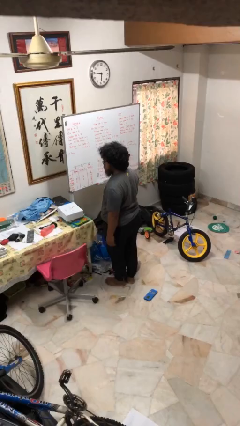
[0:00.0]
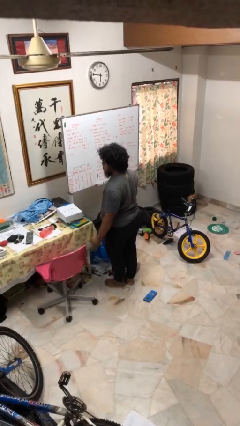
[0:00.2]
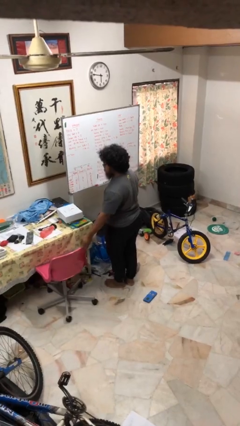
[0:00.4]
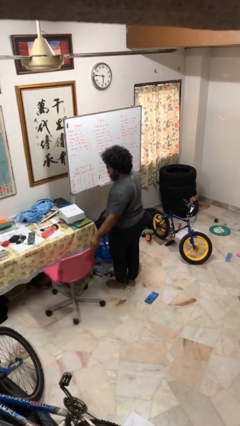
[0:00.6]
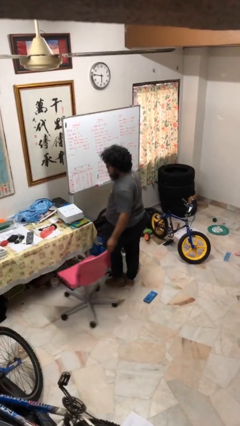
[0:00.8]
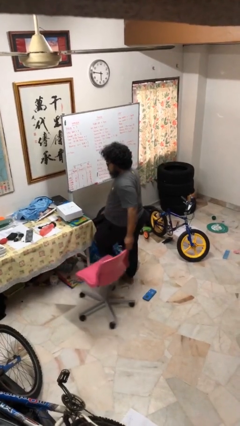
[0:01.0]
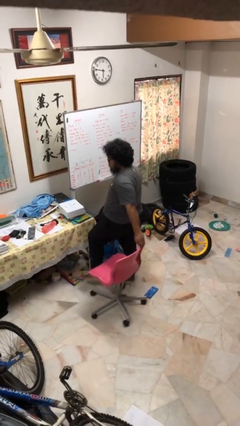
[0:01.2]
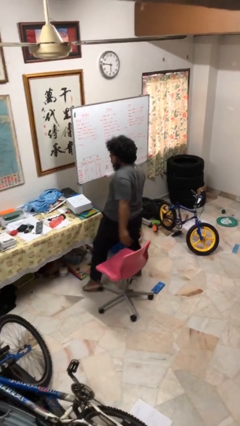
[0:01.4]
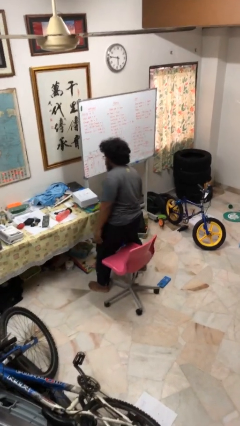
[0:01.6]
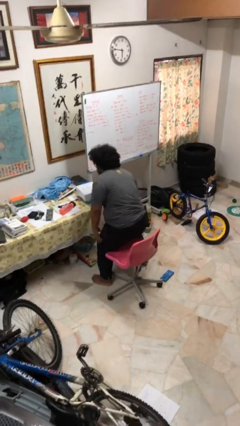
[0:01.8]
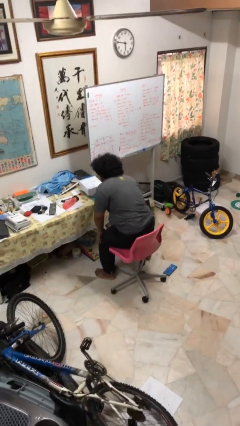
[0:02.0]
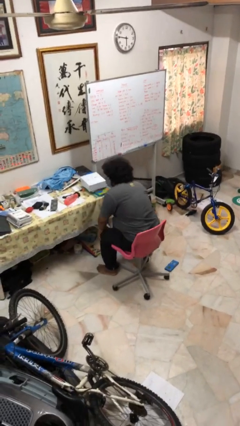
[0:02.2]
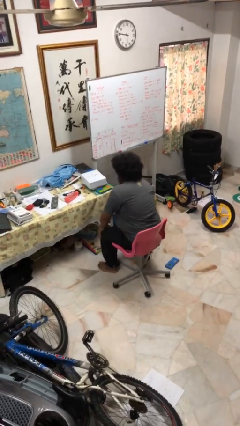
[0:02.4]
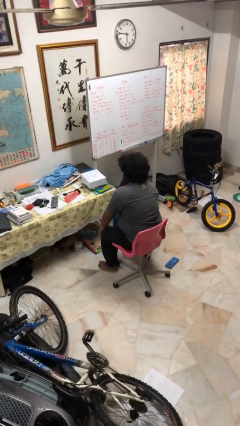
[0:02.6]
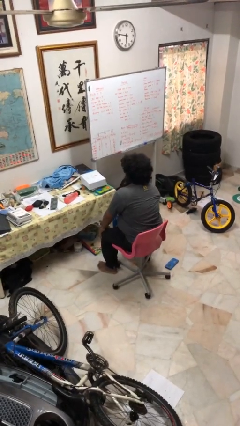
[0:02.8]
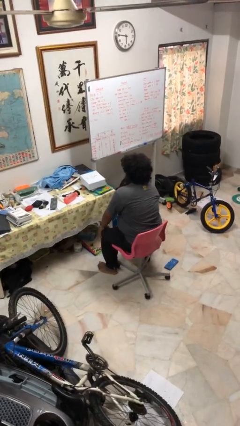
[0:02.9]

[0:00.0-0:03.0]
person sits down

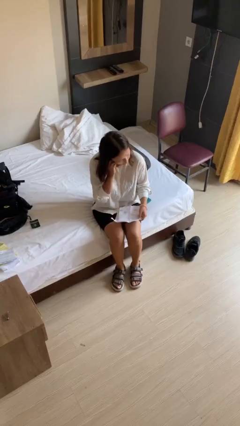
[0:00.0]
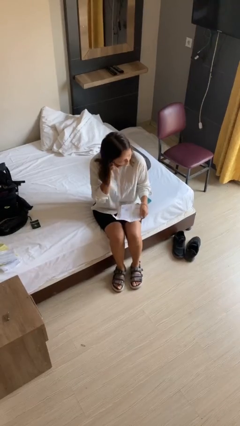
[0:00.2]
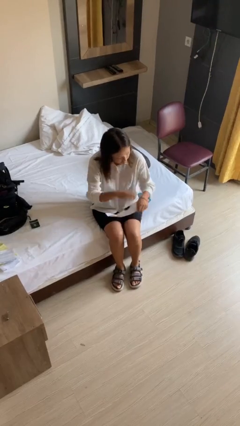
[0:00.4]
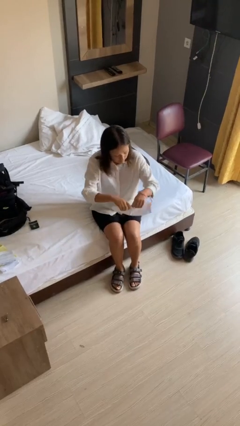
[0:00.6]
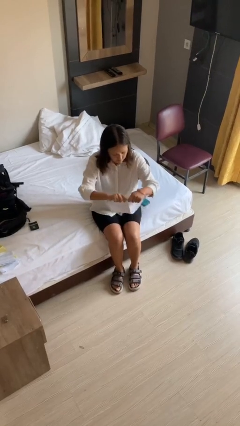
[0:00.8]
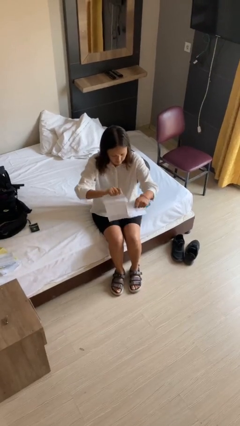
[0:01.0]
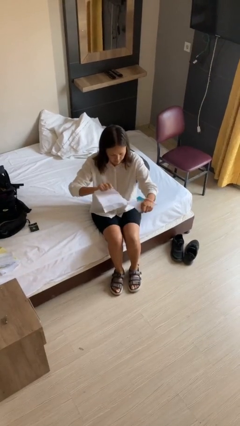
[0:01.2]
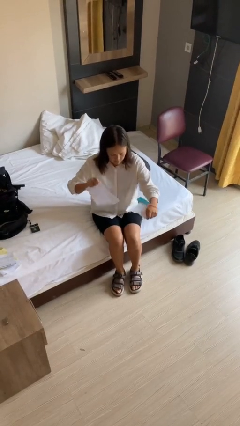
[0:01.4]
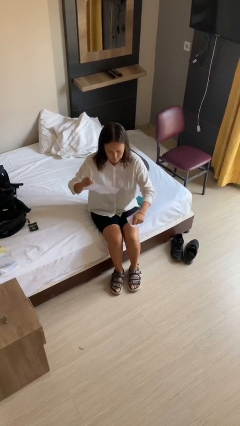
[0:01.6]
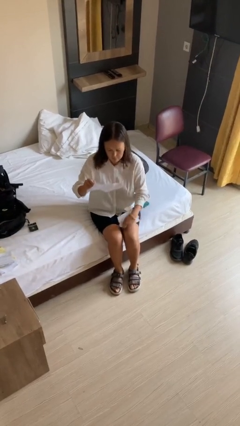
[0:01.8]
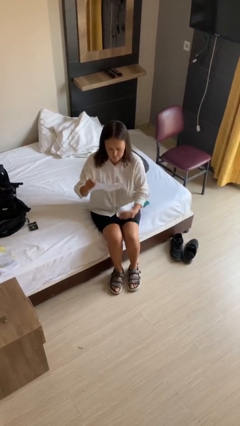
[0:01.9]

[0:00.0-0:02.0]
person tears paper

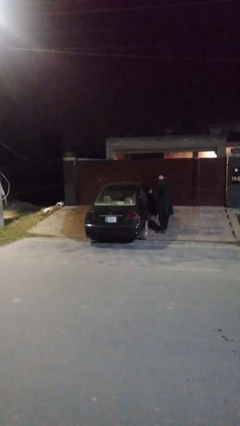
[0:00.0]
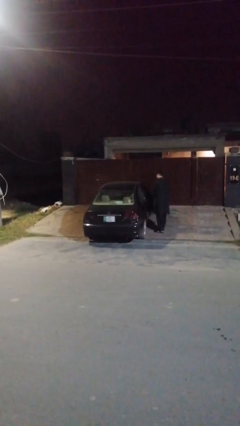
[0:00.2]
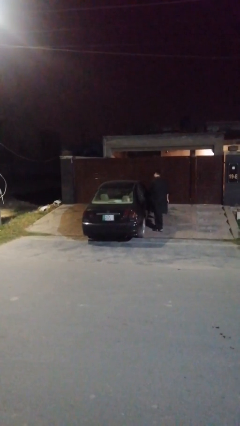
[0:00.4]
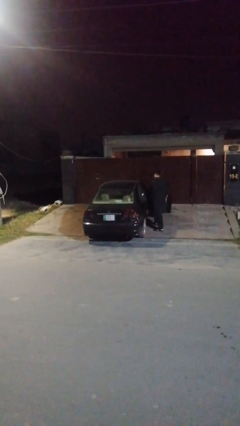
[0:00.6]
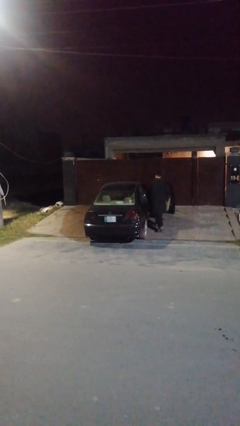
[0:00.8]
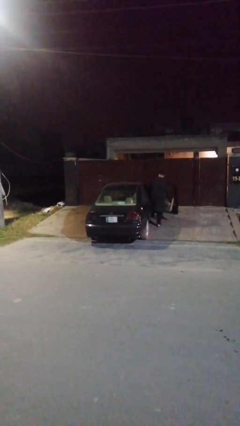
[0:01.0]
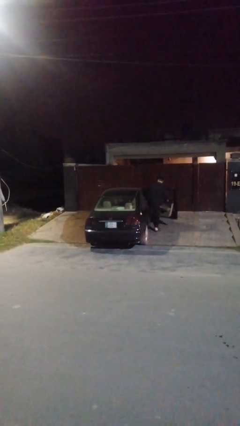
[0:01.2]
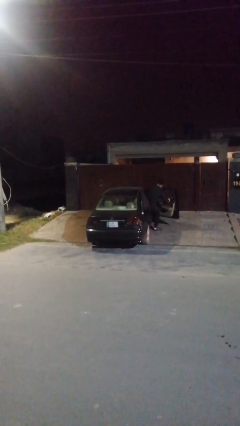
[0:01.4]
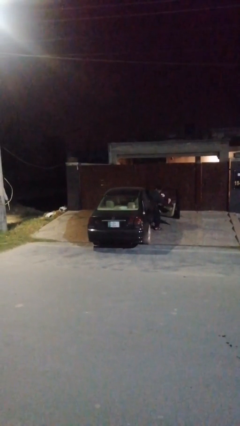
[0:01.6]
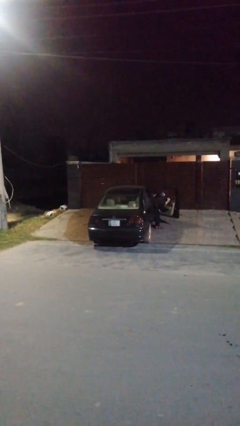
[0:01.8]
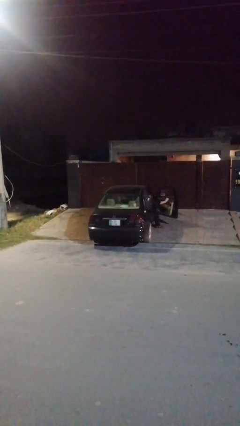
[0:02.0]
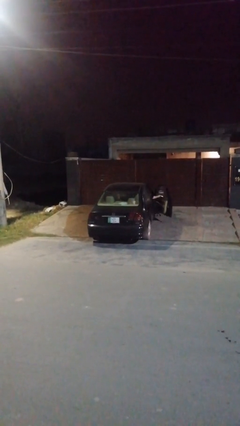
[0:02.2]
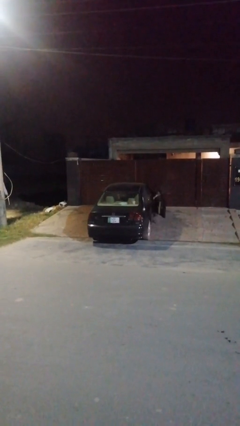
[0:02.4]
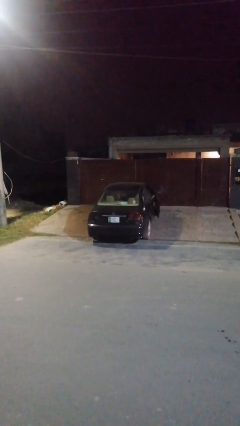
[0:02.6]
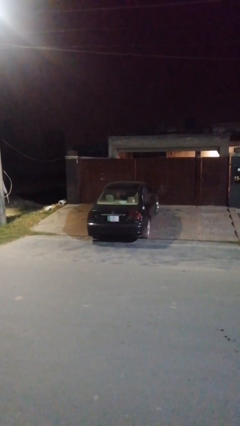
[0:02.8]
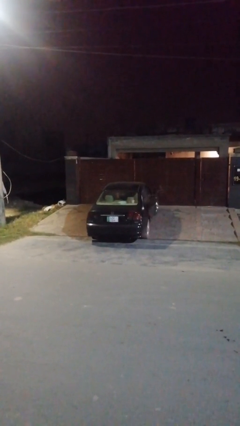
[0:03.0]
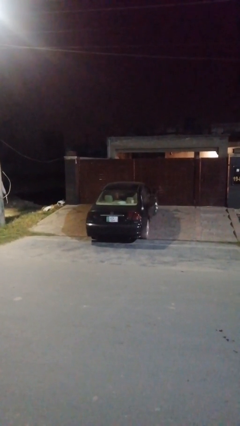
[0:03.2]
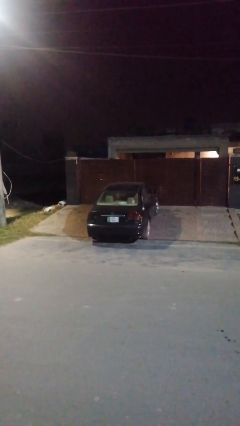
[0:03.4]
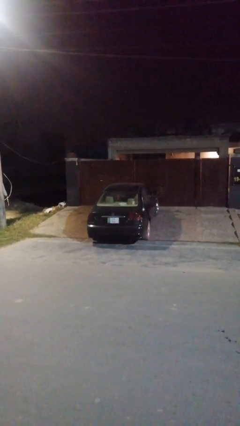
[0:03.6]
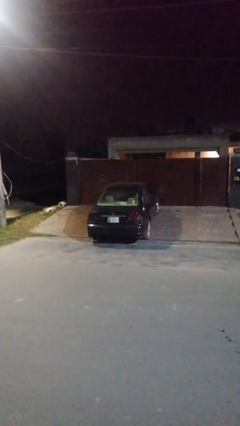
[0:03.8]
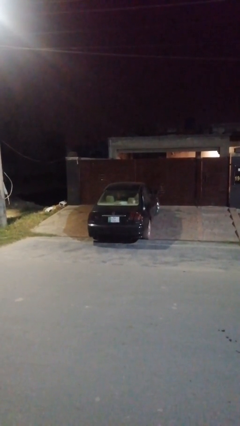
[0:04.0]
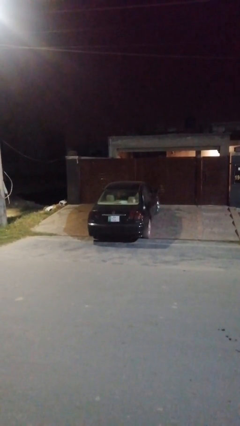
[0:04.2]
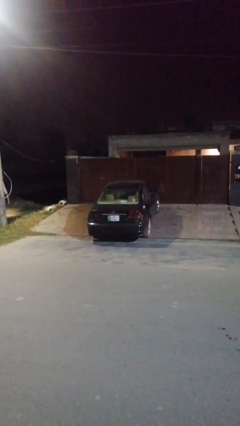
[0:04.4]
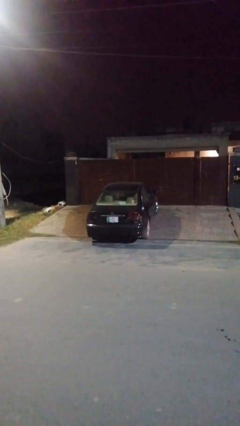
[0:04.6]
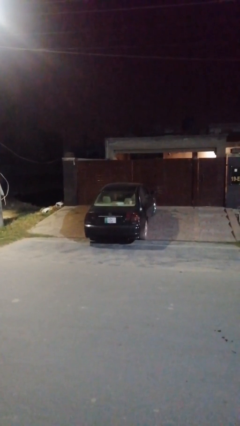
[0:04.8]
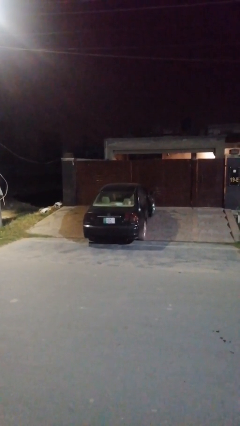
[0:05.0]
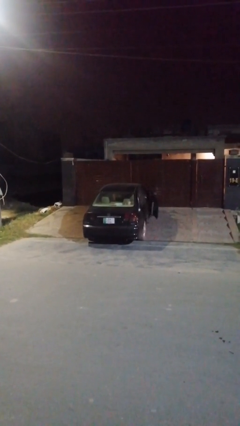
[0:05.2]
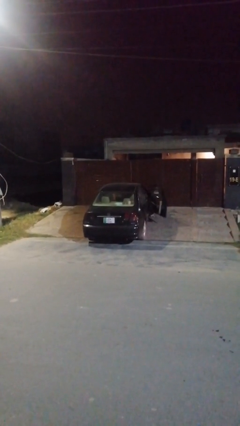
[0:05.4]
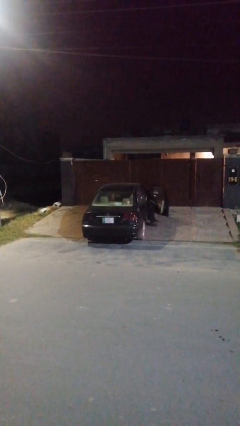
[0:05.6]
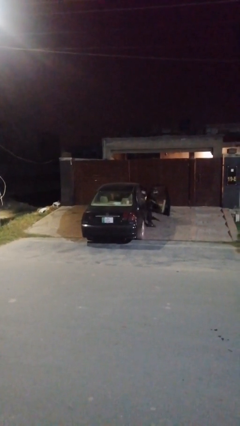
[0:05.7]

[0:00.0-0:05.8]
car picks up person

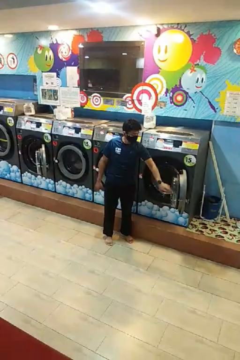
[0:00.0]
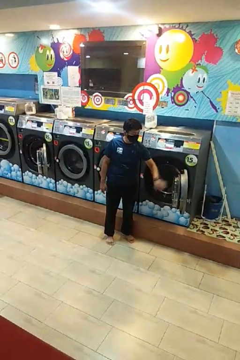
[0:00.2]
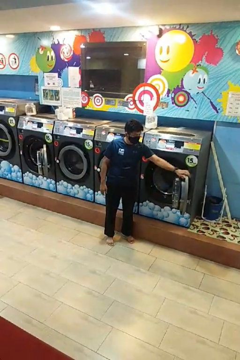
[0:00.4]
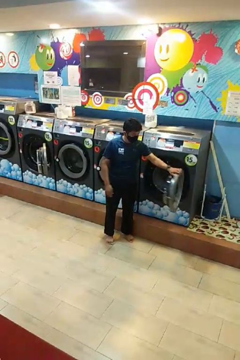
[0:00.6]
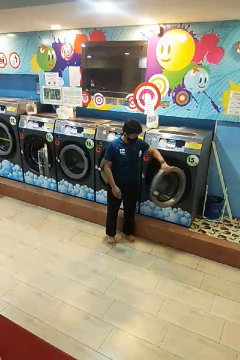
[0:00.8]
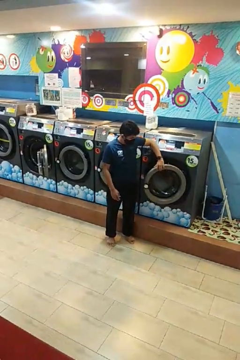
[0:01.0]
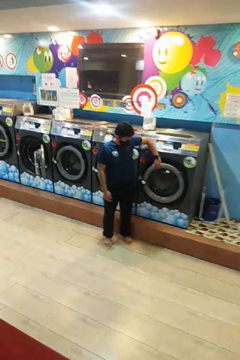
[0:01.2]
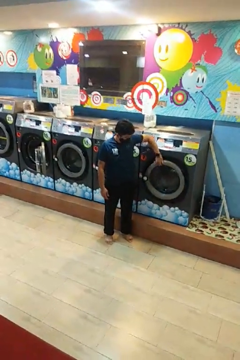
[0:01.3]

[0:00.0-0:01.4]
person closes clothes washer

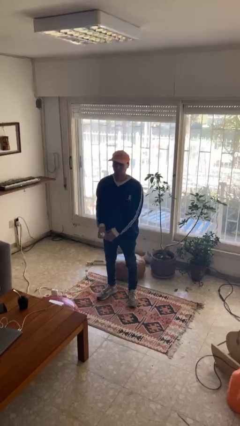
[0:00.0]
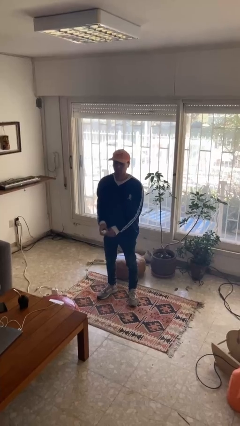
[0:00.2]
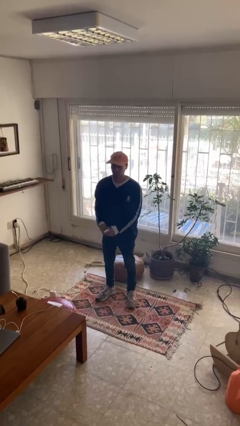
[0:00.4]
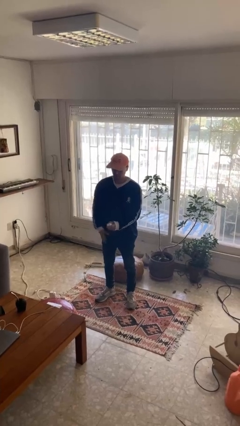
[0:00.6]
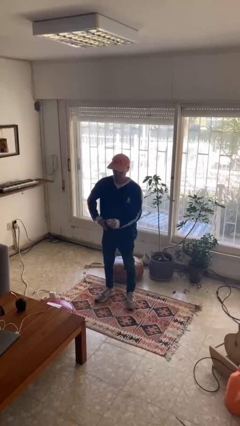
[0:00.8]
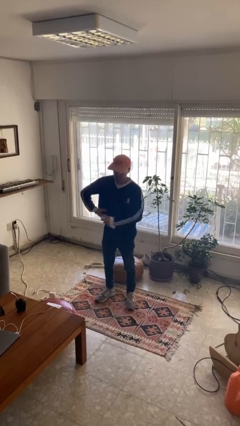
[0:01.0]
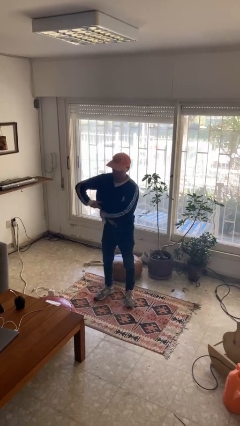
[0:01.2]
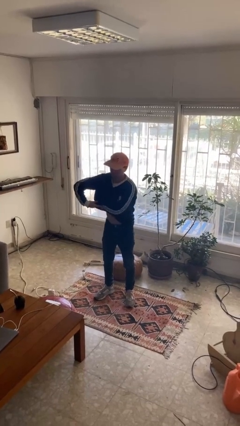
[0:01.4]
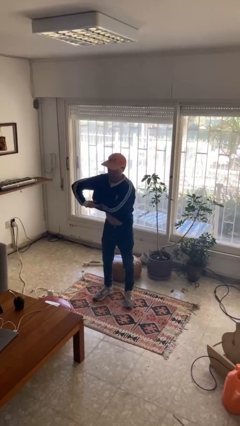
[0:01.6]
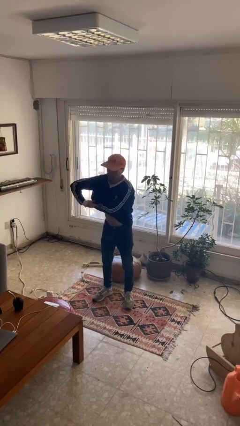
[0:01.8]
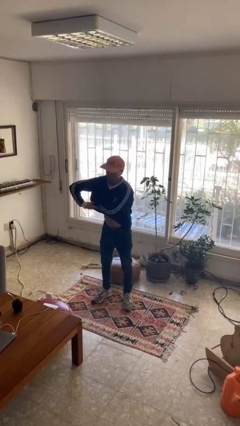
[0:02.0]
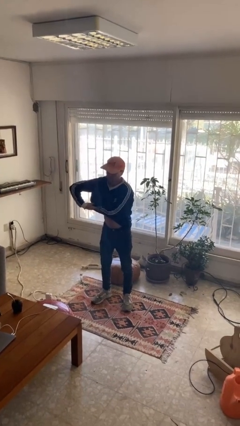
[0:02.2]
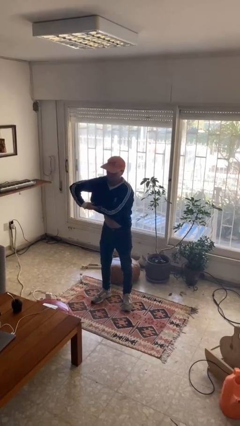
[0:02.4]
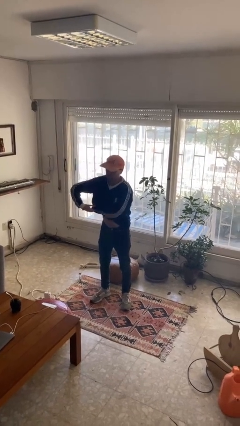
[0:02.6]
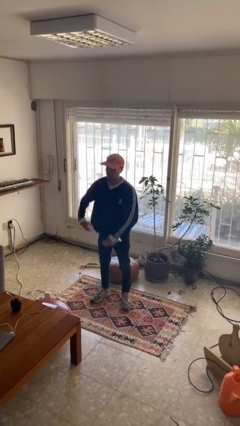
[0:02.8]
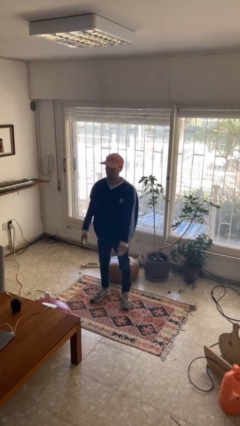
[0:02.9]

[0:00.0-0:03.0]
person applies deodorant

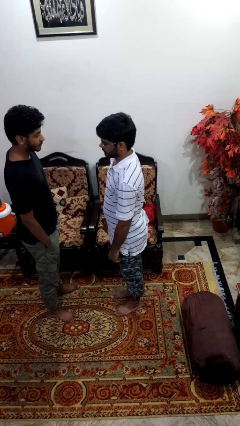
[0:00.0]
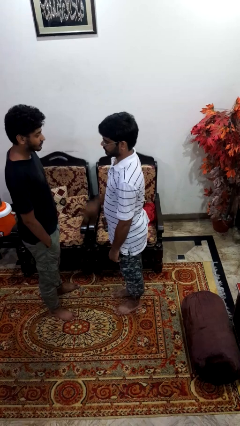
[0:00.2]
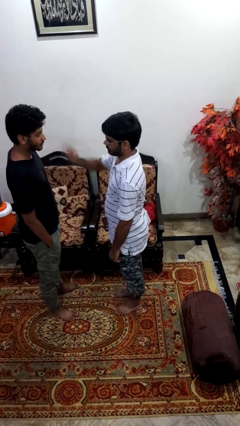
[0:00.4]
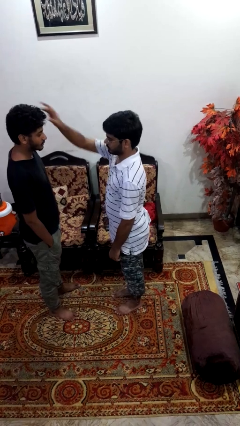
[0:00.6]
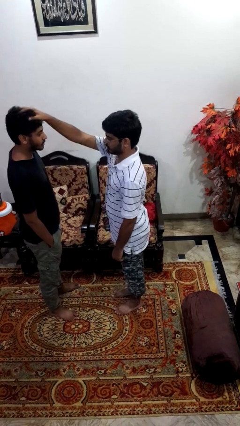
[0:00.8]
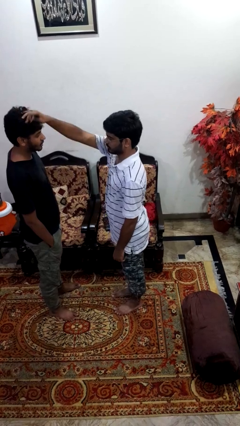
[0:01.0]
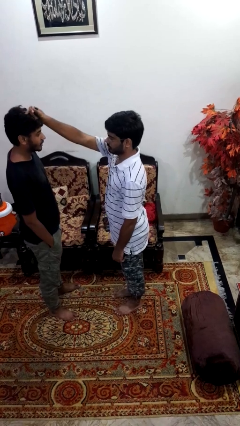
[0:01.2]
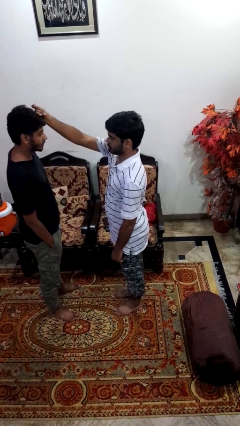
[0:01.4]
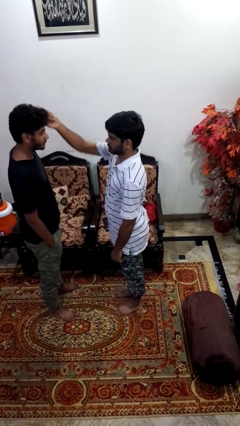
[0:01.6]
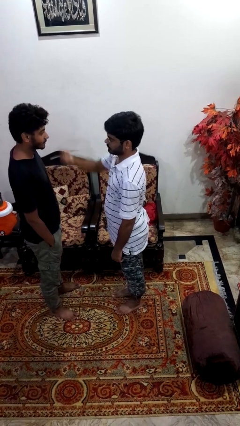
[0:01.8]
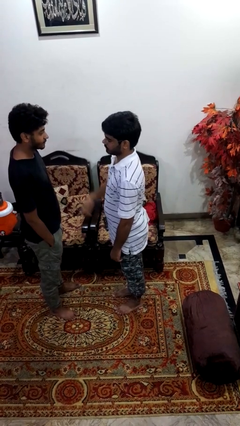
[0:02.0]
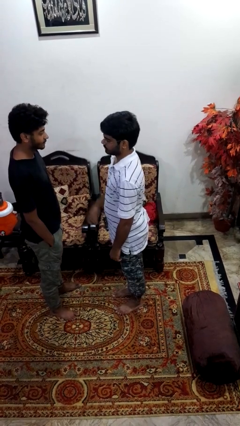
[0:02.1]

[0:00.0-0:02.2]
person grabs person by hair
